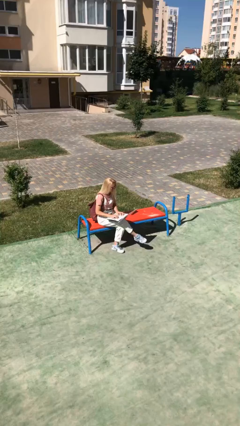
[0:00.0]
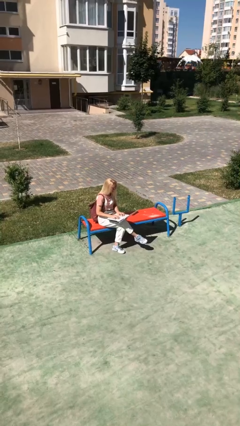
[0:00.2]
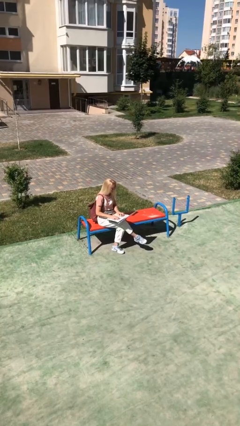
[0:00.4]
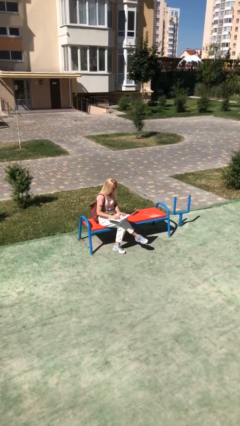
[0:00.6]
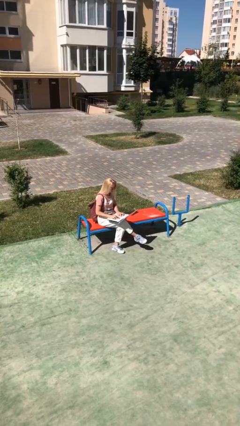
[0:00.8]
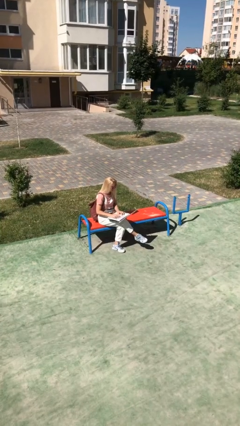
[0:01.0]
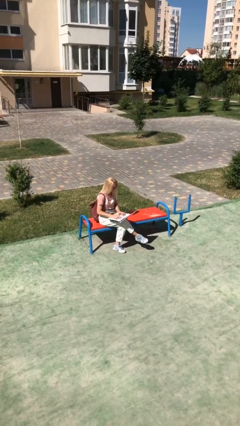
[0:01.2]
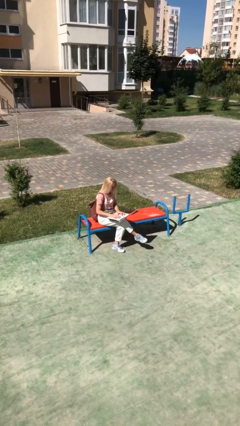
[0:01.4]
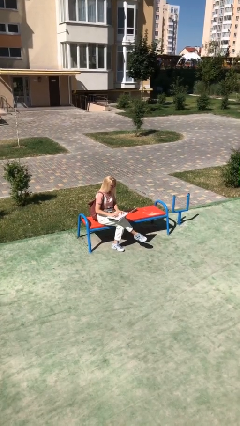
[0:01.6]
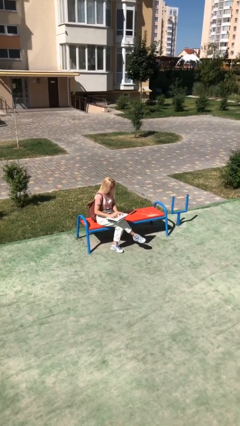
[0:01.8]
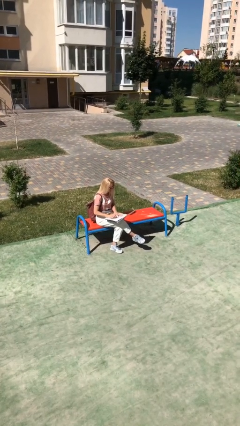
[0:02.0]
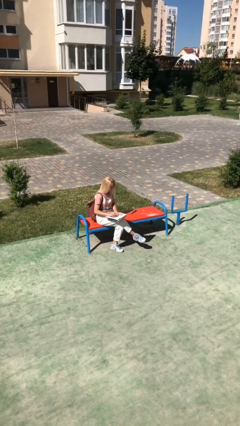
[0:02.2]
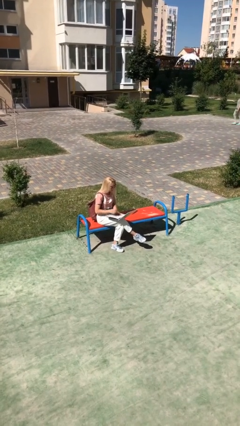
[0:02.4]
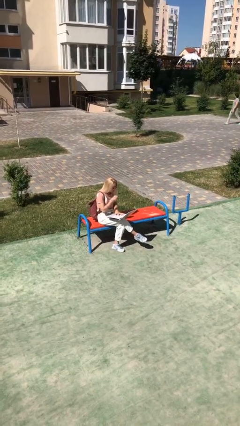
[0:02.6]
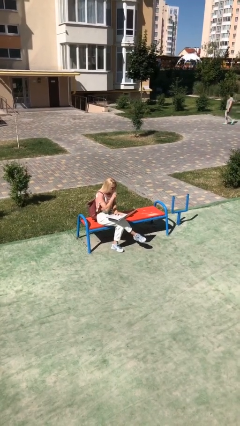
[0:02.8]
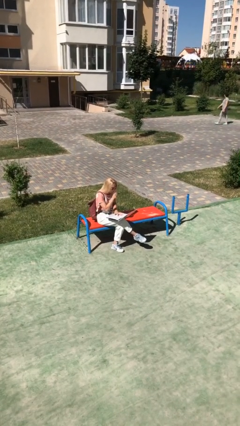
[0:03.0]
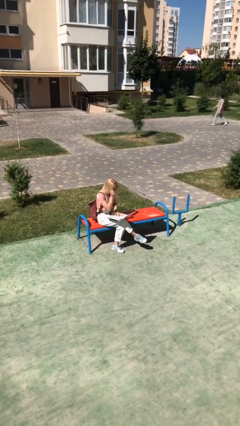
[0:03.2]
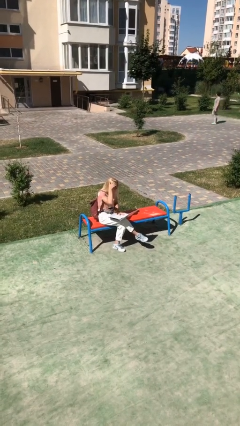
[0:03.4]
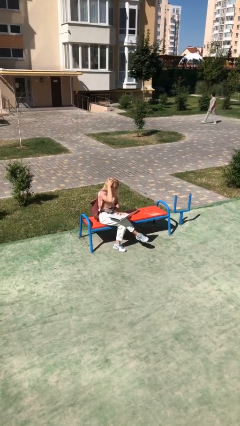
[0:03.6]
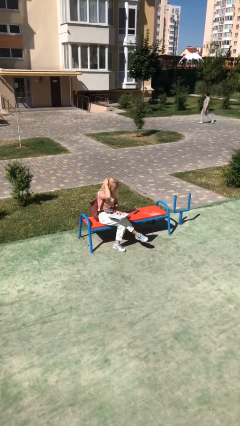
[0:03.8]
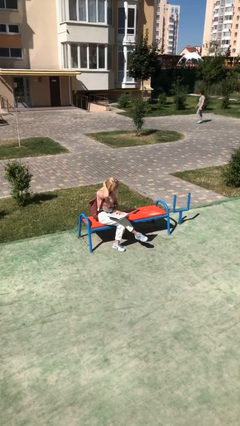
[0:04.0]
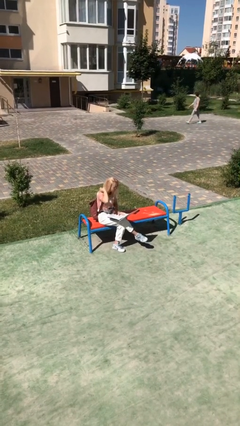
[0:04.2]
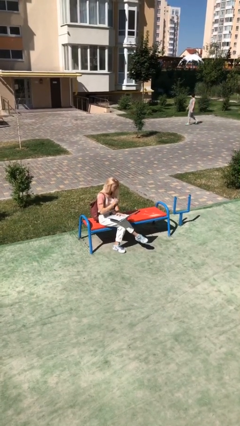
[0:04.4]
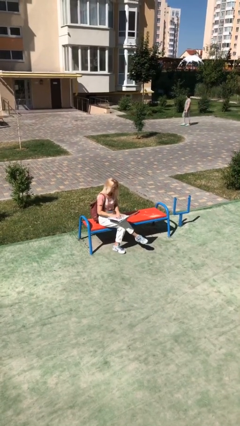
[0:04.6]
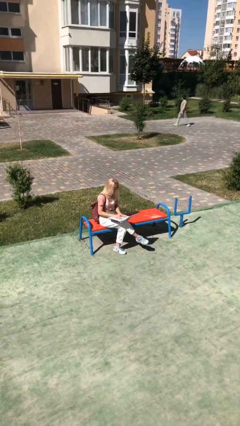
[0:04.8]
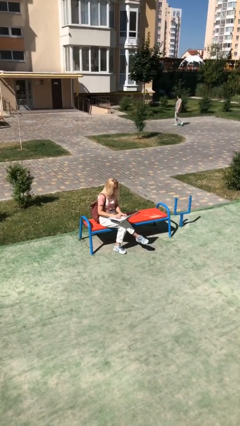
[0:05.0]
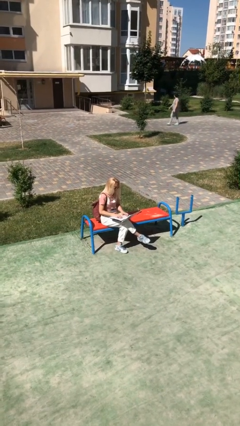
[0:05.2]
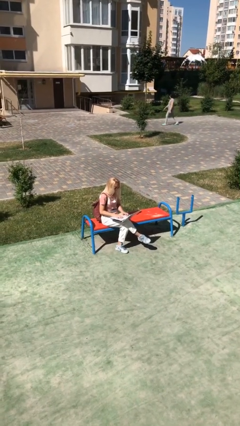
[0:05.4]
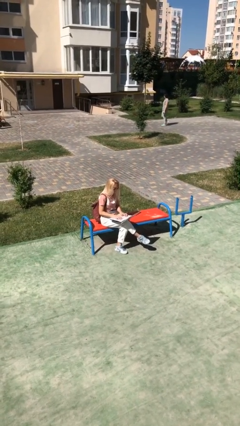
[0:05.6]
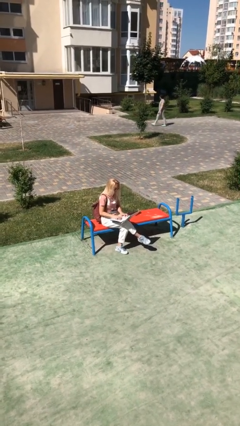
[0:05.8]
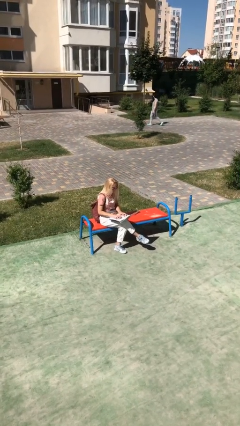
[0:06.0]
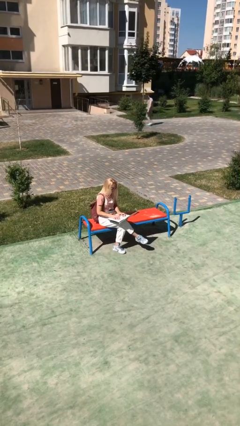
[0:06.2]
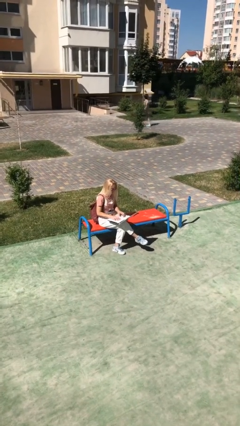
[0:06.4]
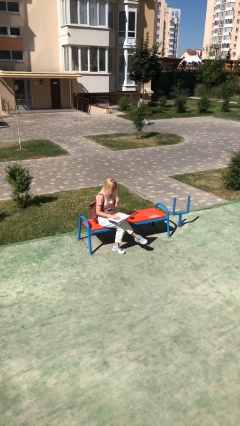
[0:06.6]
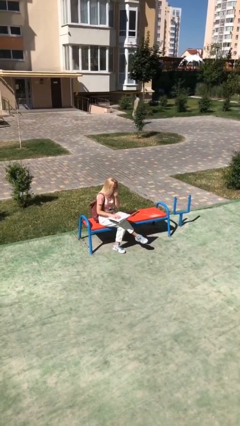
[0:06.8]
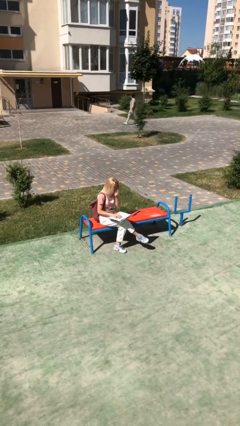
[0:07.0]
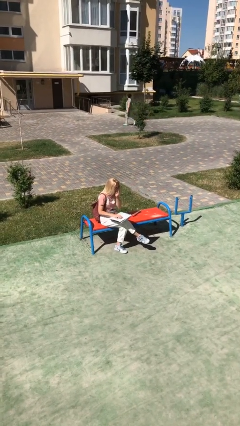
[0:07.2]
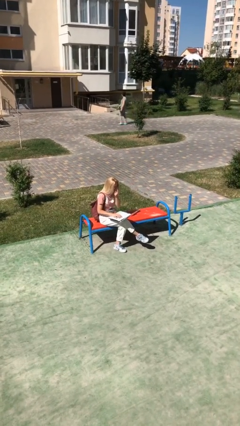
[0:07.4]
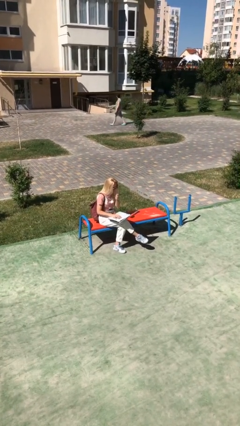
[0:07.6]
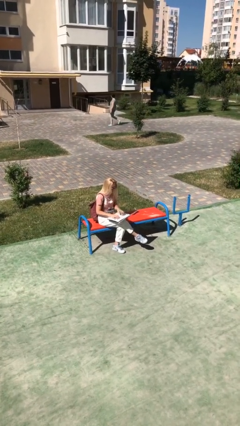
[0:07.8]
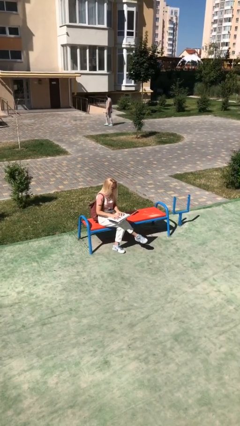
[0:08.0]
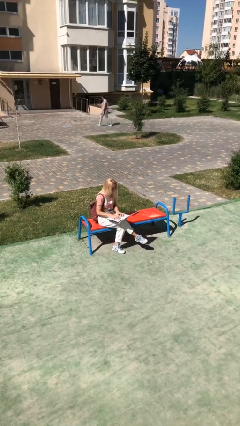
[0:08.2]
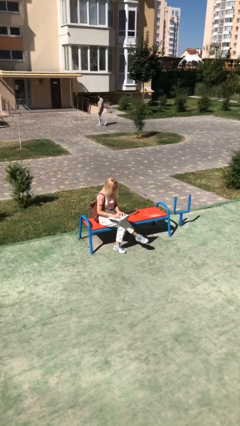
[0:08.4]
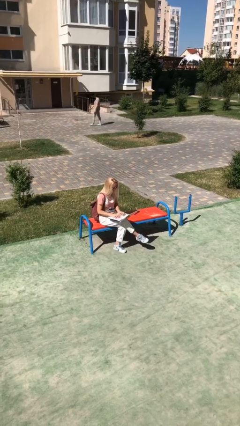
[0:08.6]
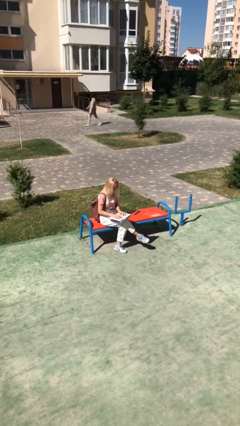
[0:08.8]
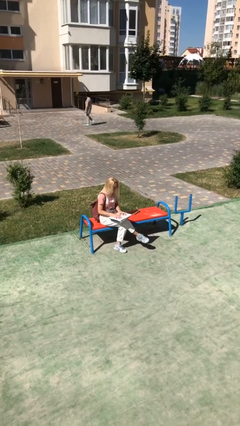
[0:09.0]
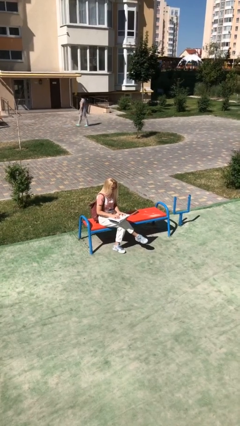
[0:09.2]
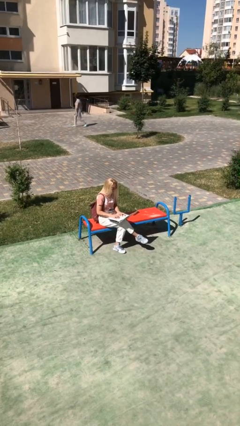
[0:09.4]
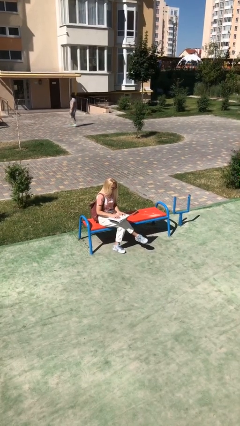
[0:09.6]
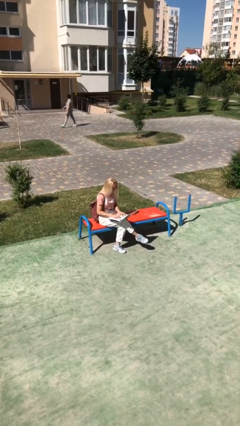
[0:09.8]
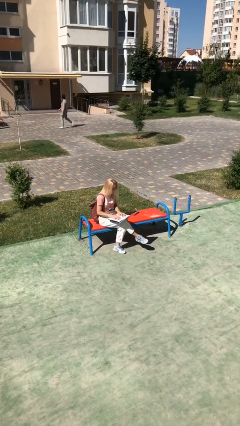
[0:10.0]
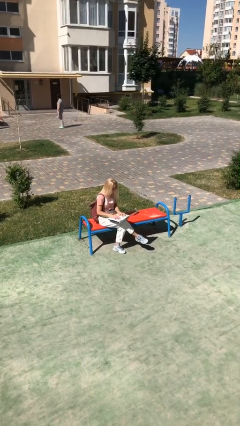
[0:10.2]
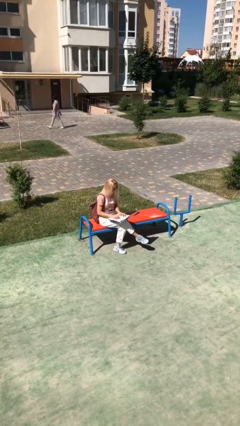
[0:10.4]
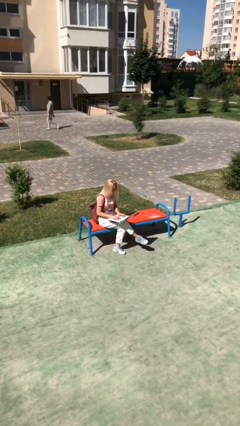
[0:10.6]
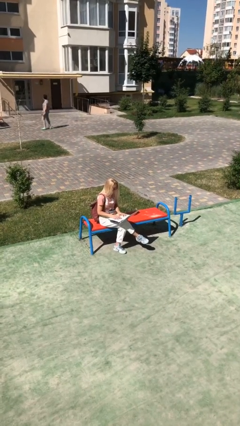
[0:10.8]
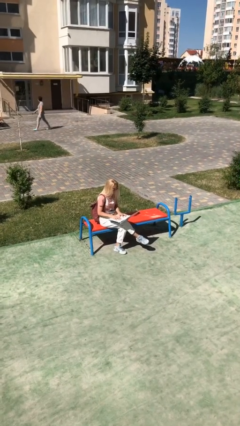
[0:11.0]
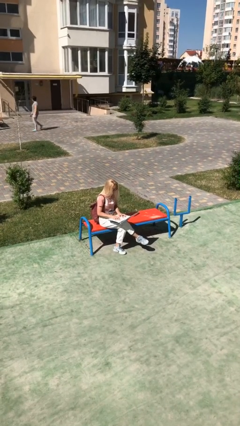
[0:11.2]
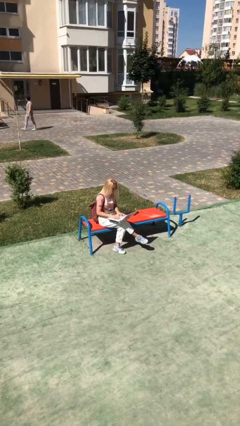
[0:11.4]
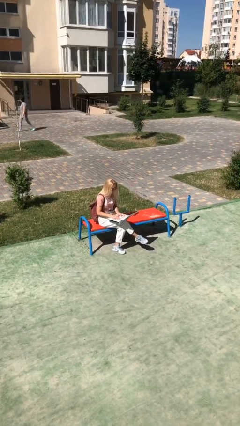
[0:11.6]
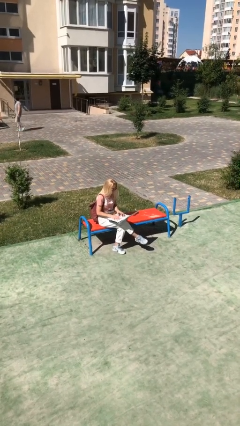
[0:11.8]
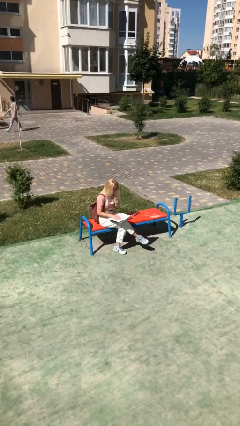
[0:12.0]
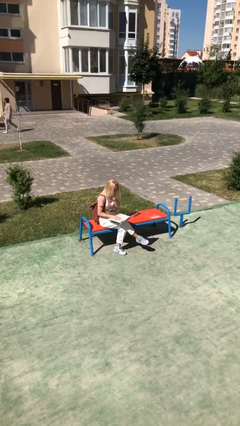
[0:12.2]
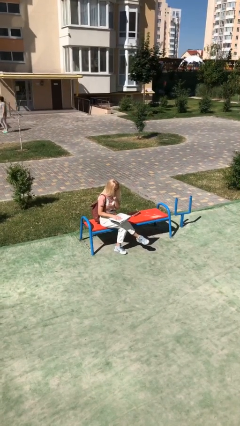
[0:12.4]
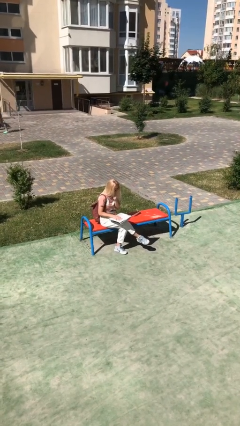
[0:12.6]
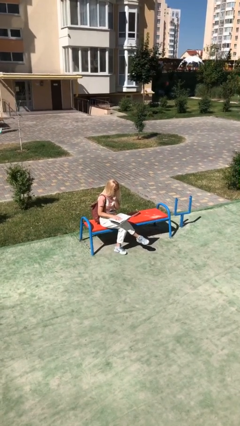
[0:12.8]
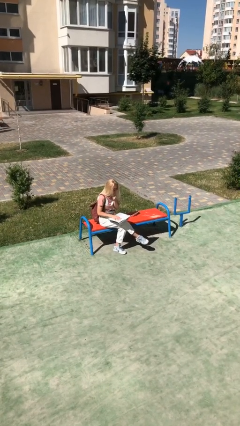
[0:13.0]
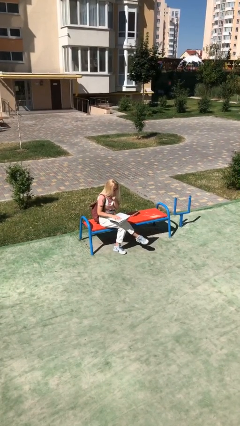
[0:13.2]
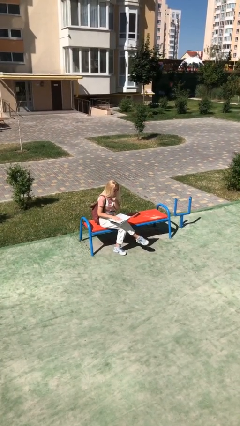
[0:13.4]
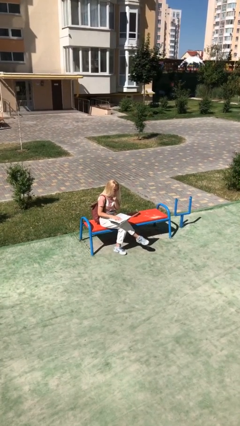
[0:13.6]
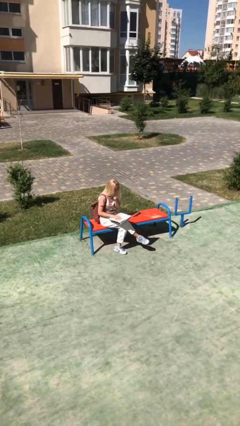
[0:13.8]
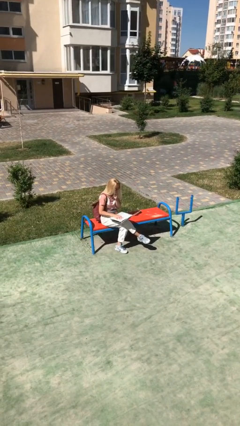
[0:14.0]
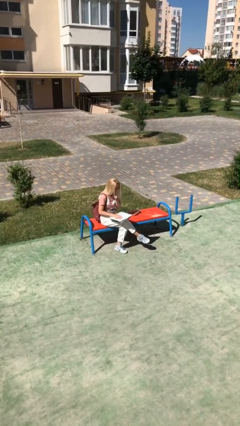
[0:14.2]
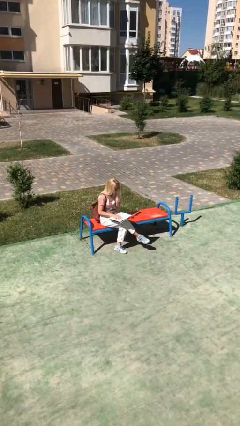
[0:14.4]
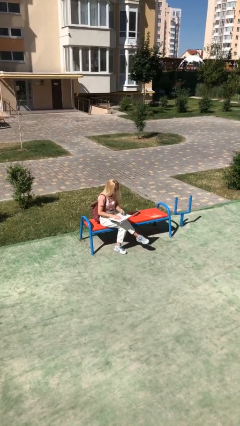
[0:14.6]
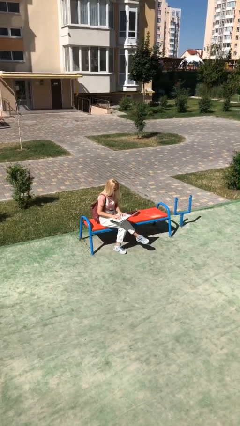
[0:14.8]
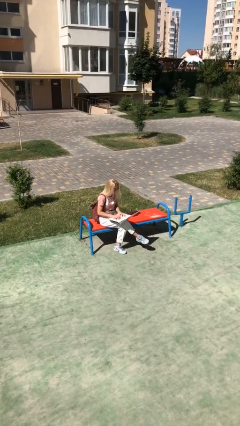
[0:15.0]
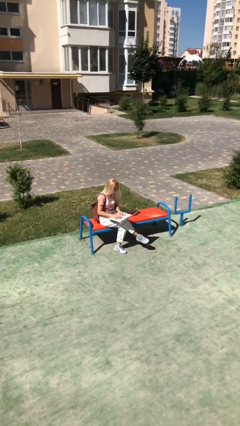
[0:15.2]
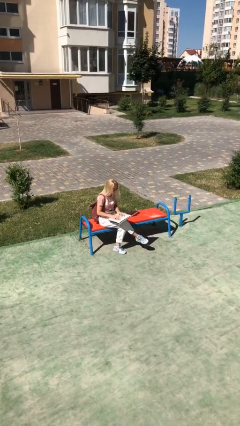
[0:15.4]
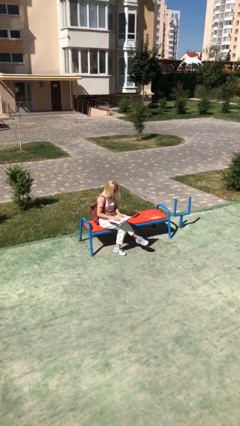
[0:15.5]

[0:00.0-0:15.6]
person interacts with laptop

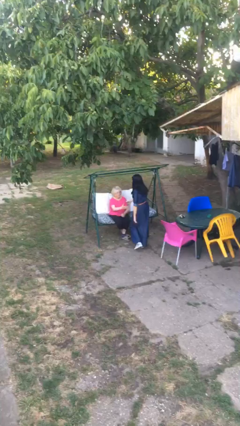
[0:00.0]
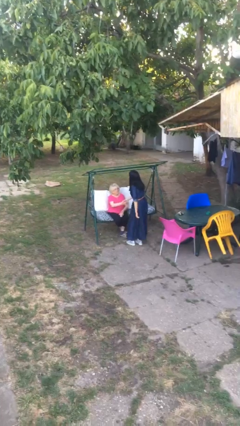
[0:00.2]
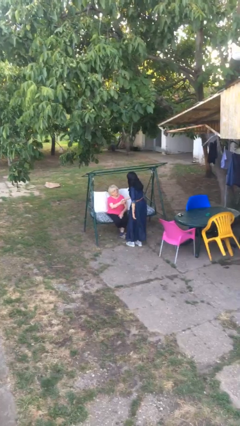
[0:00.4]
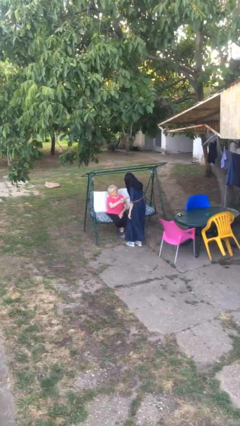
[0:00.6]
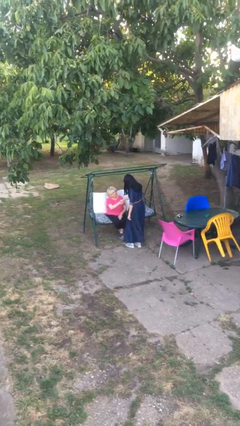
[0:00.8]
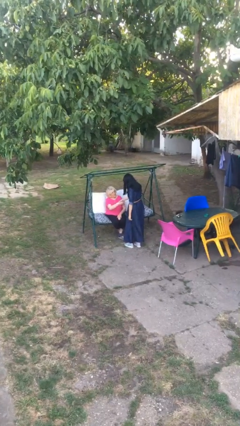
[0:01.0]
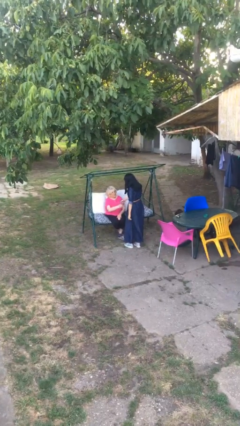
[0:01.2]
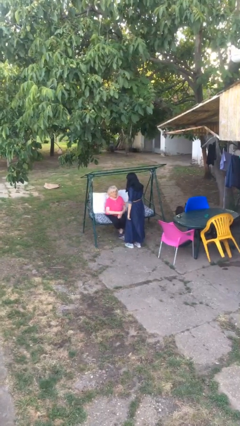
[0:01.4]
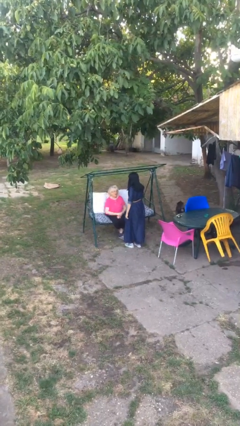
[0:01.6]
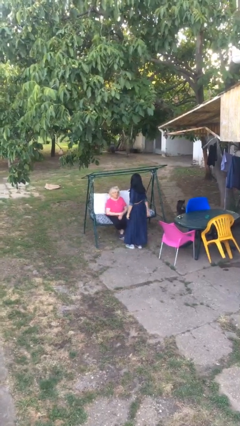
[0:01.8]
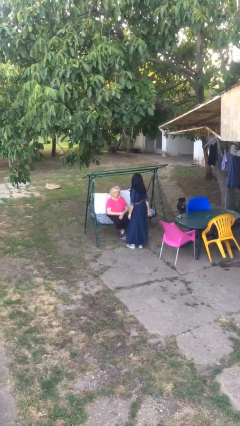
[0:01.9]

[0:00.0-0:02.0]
person shakes hand

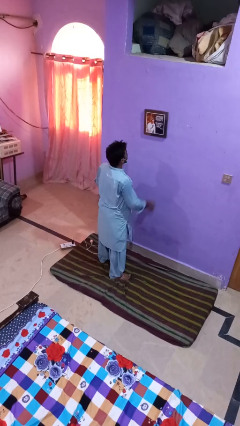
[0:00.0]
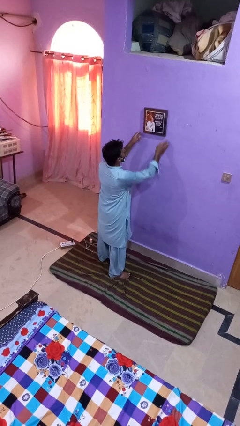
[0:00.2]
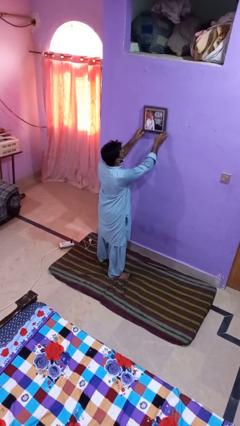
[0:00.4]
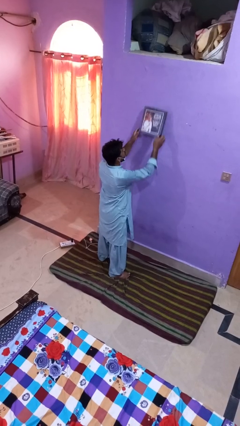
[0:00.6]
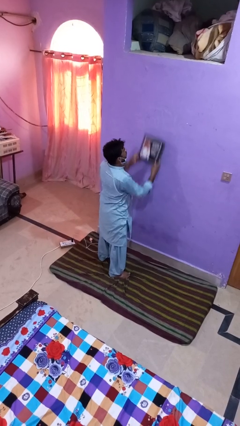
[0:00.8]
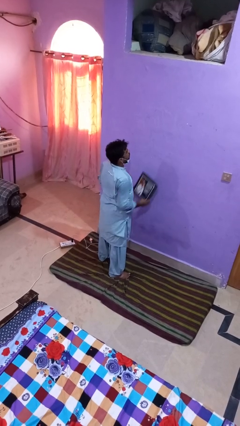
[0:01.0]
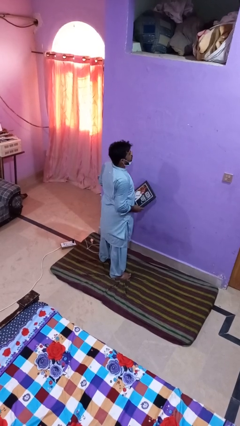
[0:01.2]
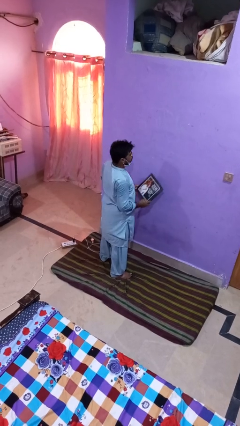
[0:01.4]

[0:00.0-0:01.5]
person takes down picture frame
